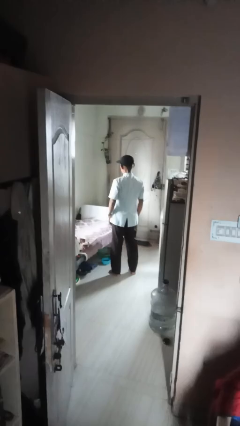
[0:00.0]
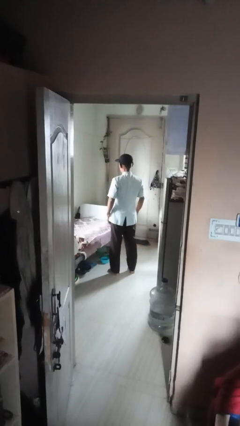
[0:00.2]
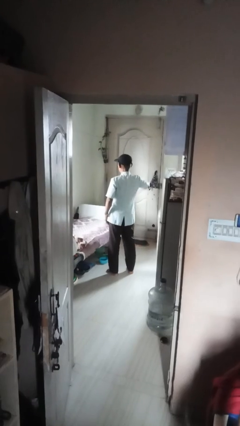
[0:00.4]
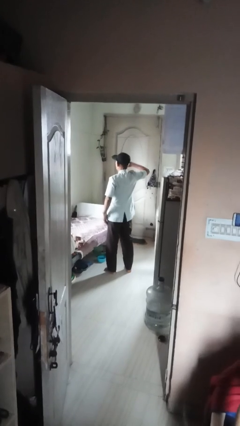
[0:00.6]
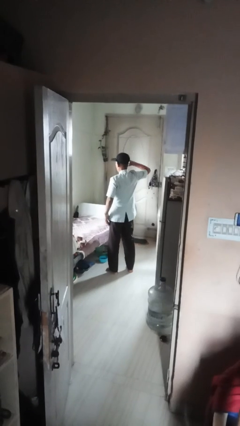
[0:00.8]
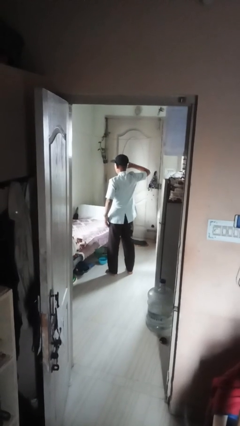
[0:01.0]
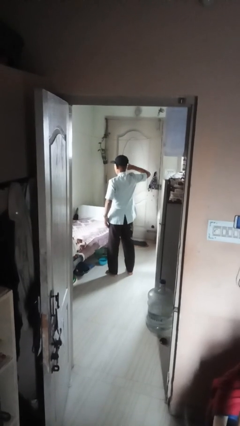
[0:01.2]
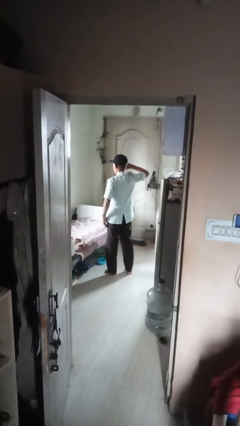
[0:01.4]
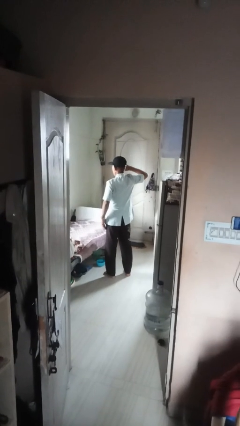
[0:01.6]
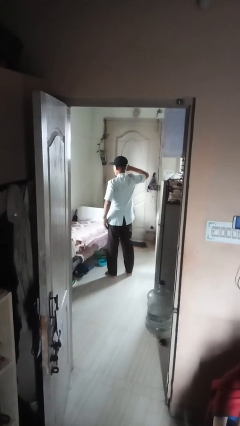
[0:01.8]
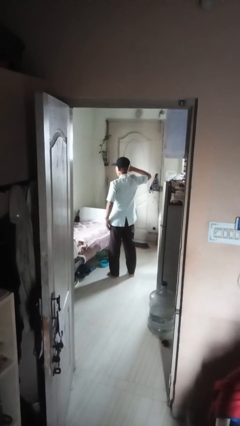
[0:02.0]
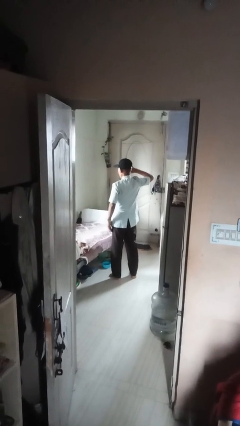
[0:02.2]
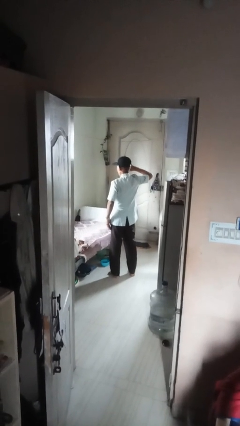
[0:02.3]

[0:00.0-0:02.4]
person salutes

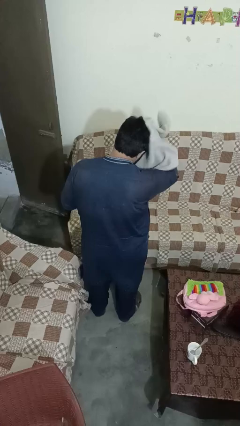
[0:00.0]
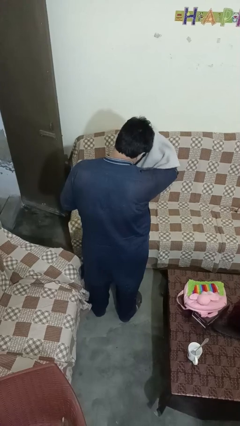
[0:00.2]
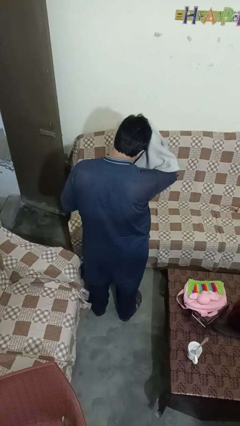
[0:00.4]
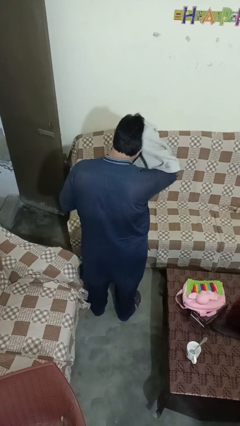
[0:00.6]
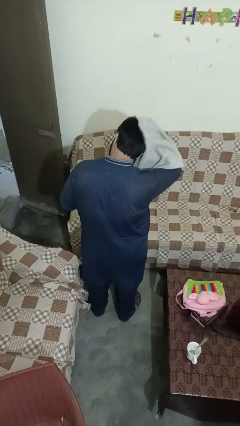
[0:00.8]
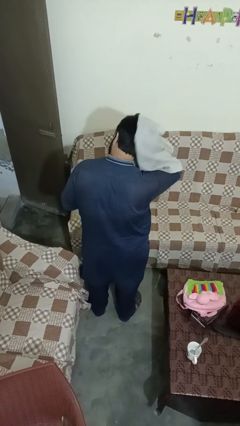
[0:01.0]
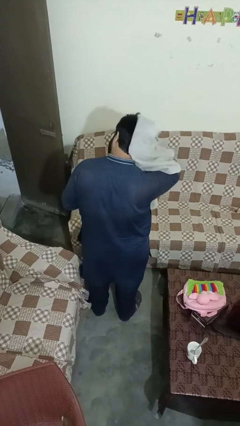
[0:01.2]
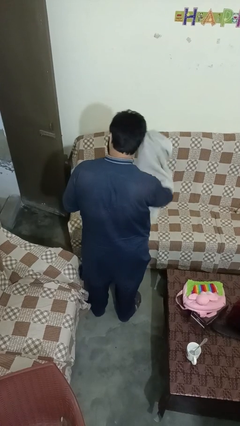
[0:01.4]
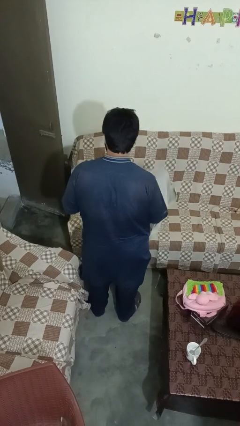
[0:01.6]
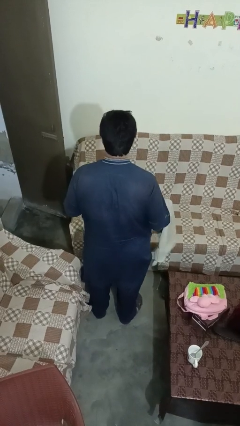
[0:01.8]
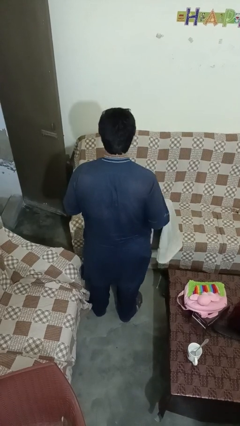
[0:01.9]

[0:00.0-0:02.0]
person dries hair with towel

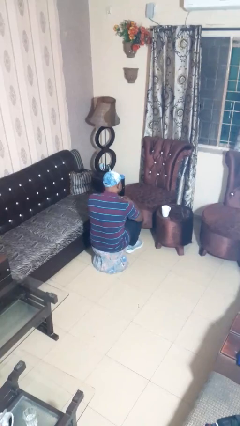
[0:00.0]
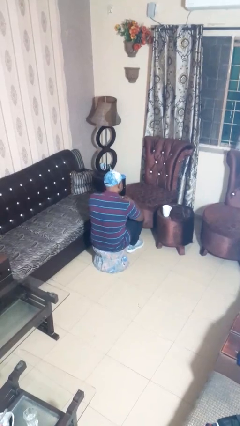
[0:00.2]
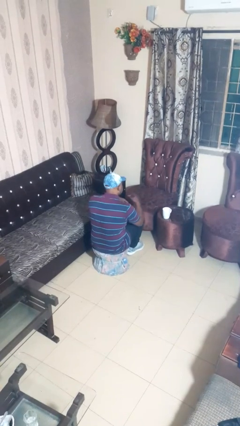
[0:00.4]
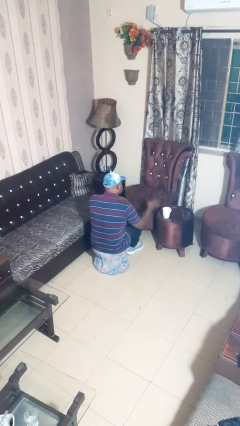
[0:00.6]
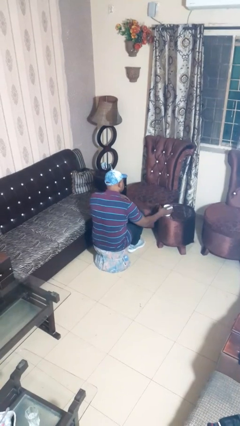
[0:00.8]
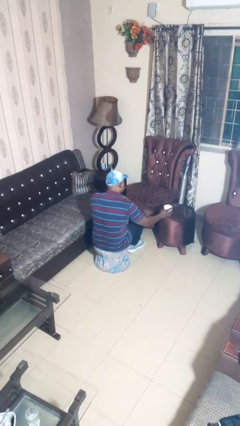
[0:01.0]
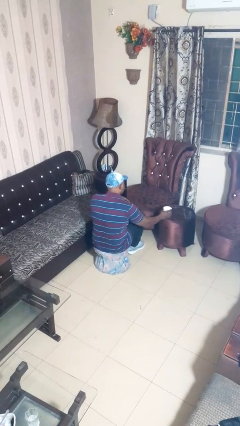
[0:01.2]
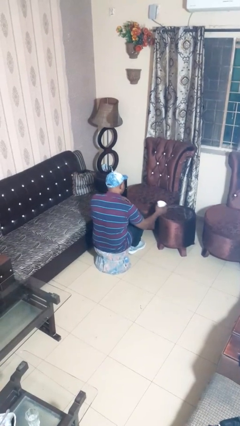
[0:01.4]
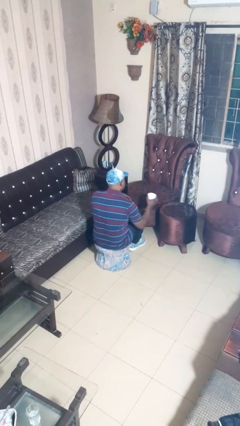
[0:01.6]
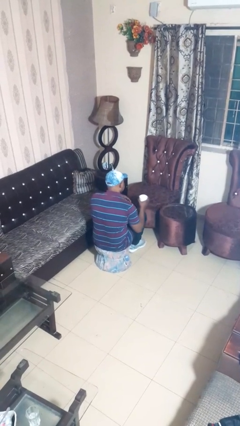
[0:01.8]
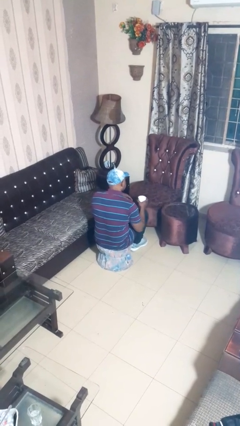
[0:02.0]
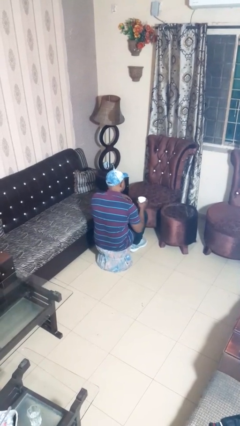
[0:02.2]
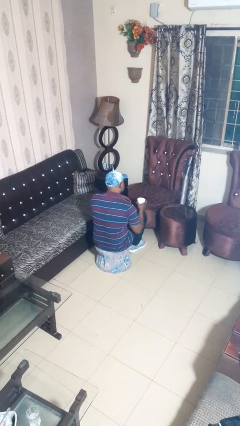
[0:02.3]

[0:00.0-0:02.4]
person picks up object from table

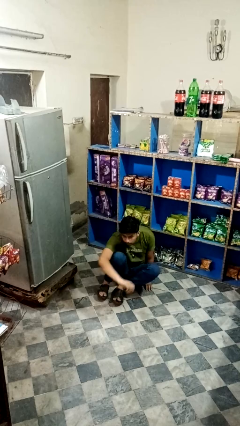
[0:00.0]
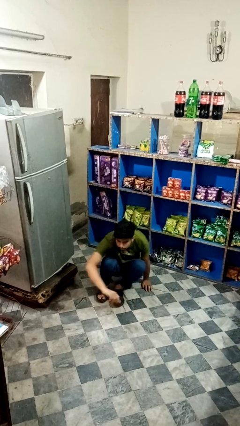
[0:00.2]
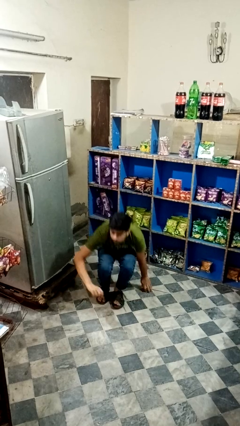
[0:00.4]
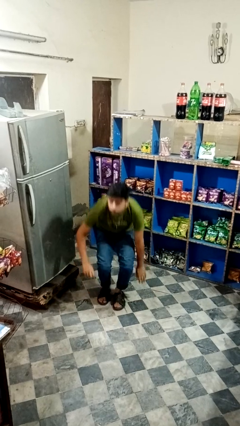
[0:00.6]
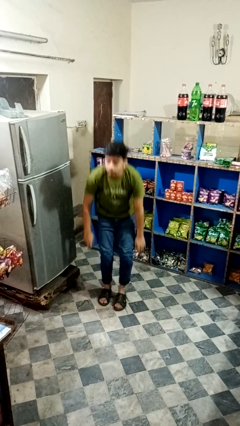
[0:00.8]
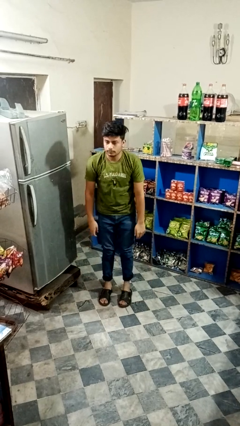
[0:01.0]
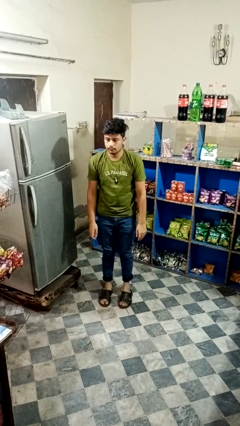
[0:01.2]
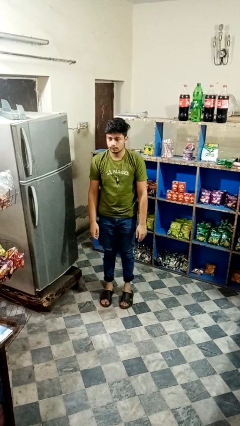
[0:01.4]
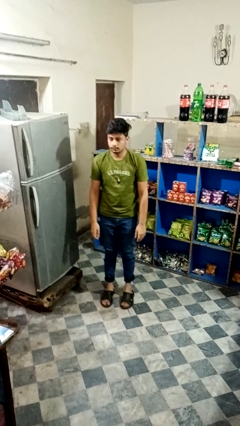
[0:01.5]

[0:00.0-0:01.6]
person stands up from floor

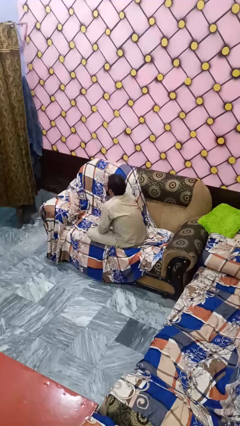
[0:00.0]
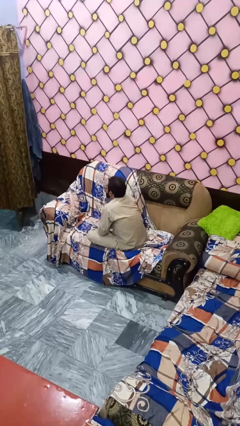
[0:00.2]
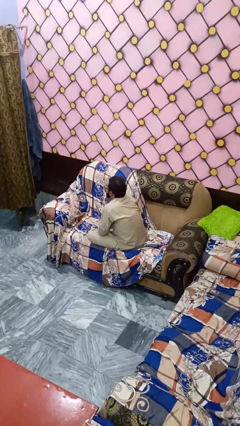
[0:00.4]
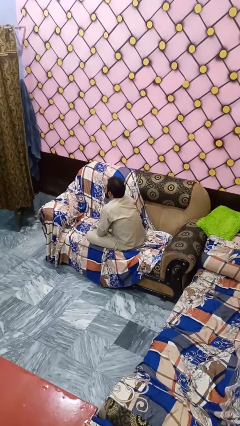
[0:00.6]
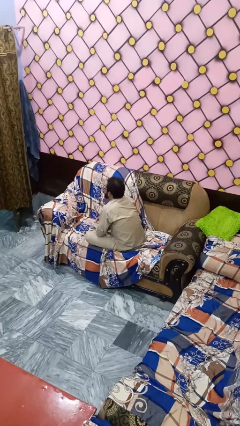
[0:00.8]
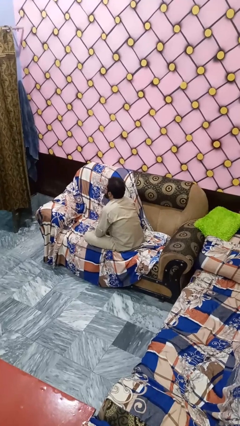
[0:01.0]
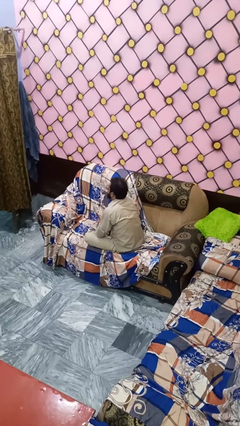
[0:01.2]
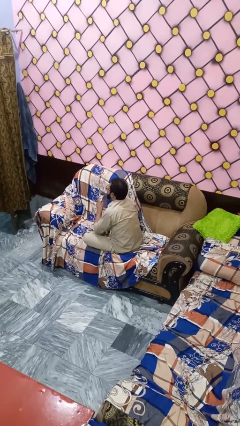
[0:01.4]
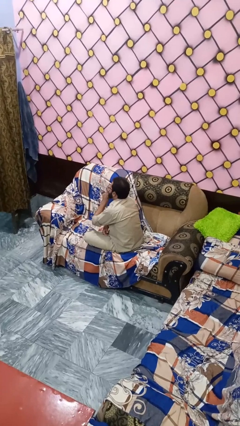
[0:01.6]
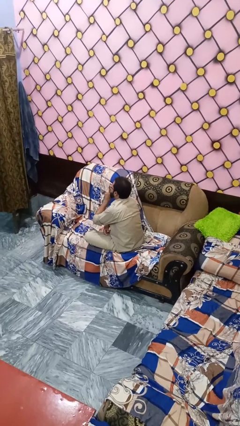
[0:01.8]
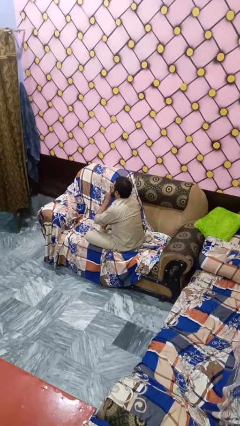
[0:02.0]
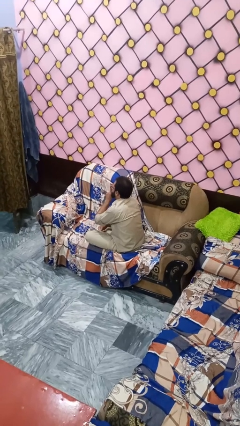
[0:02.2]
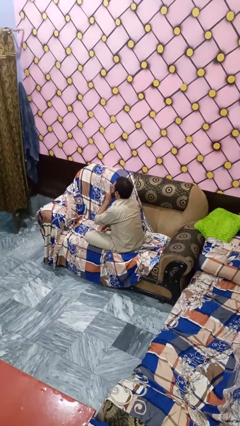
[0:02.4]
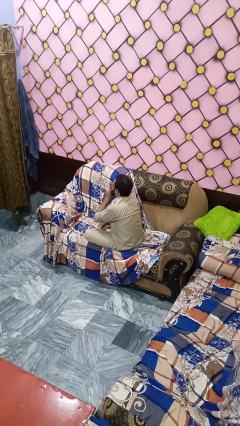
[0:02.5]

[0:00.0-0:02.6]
person gestures be quiet

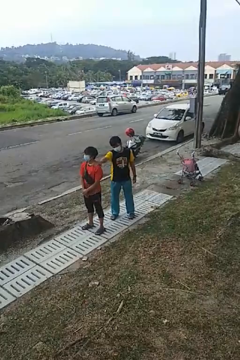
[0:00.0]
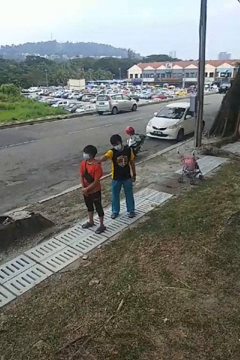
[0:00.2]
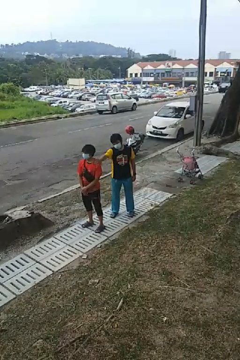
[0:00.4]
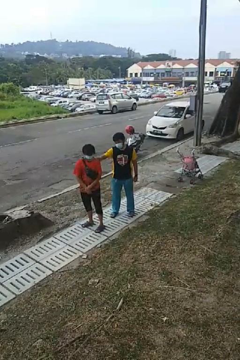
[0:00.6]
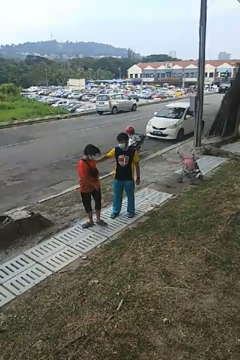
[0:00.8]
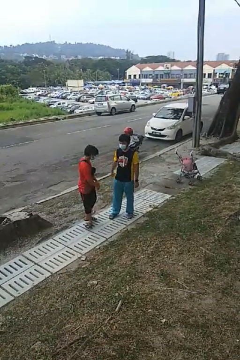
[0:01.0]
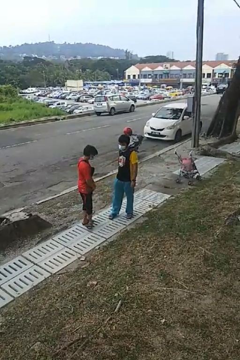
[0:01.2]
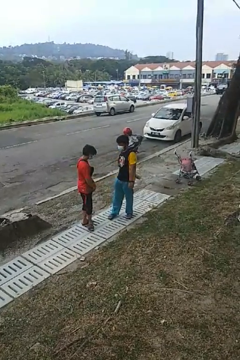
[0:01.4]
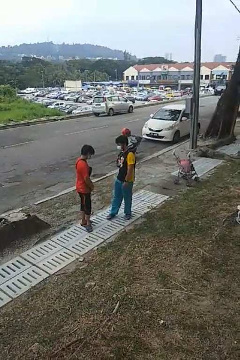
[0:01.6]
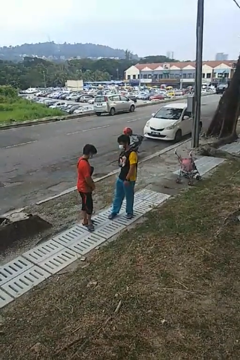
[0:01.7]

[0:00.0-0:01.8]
person spins person around

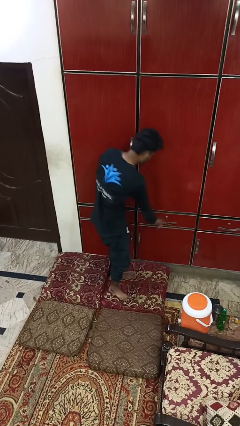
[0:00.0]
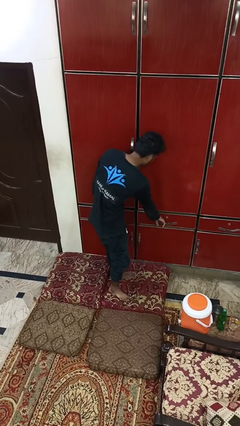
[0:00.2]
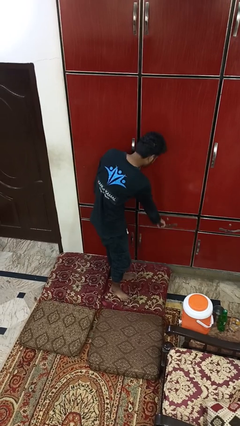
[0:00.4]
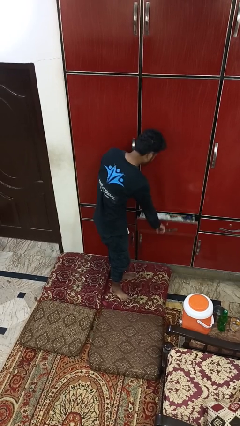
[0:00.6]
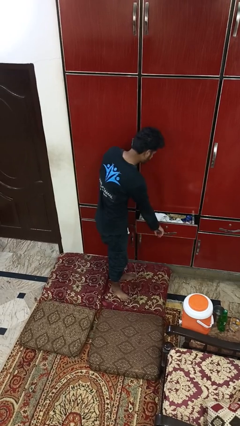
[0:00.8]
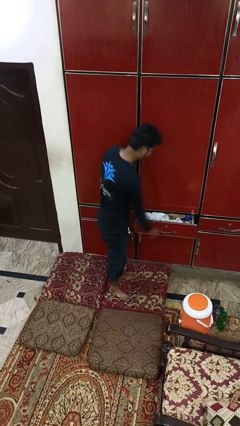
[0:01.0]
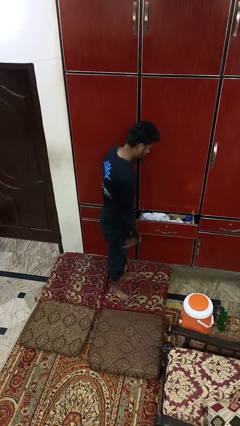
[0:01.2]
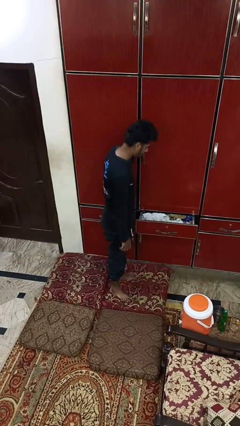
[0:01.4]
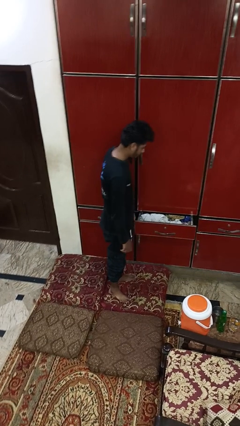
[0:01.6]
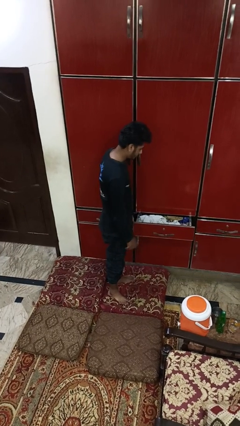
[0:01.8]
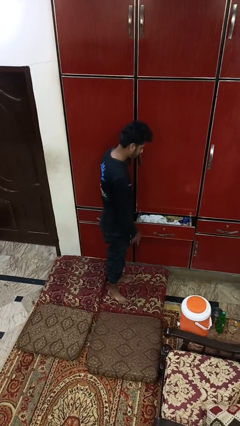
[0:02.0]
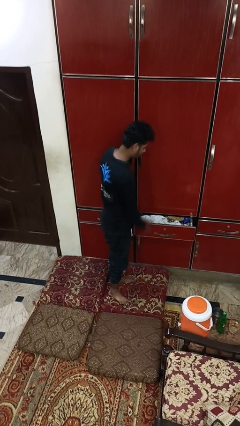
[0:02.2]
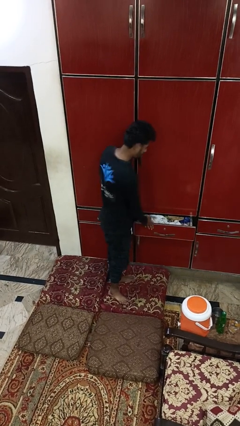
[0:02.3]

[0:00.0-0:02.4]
person opens dresser drawer

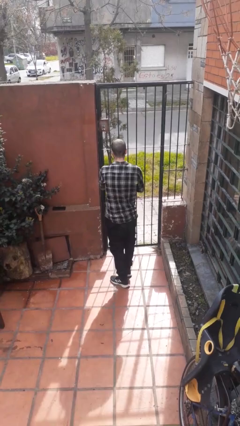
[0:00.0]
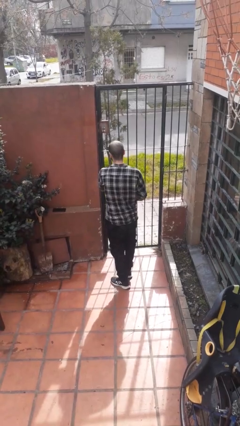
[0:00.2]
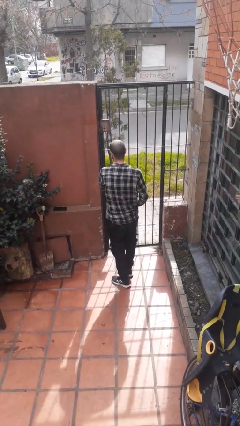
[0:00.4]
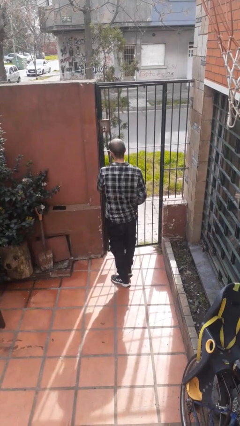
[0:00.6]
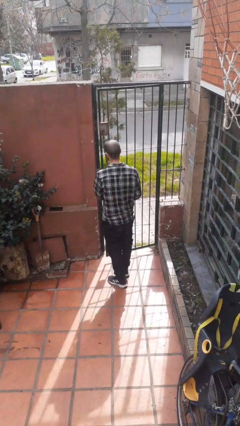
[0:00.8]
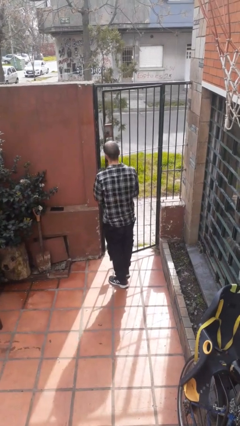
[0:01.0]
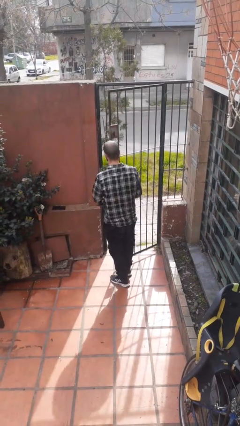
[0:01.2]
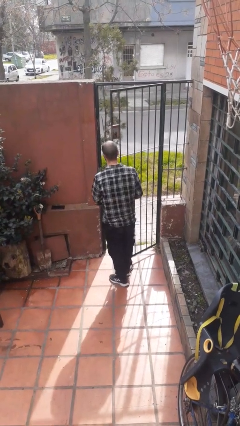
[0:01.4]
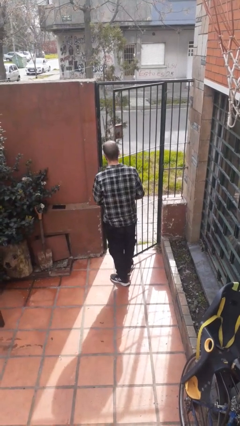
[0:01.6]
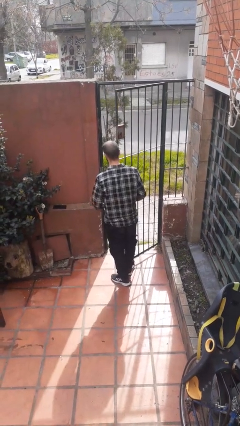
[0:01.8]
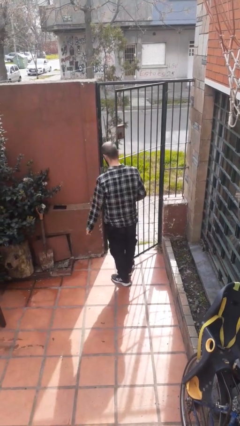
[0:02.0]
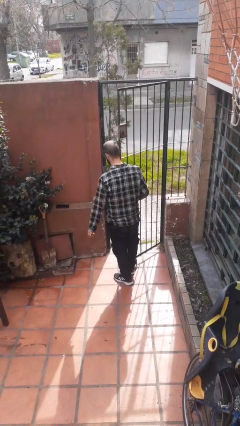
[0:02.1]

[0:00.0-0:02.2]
person opens gate
